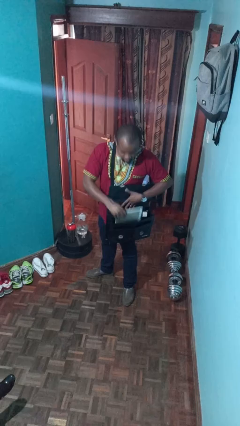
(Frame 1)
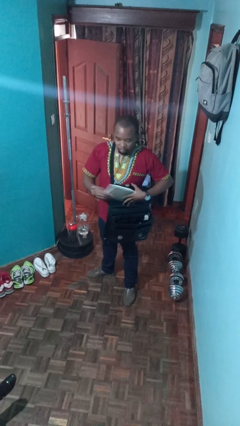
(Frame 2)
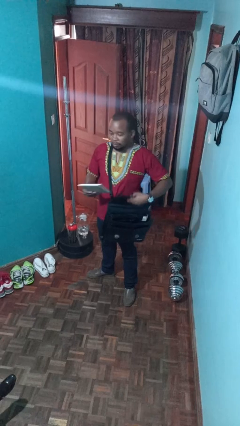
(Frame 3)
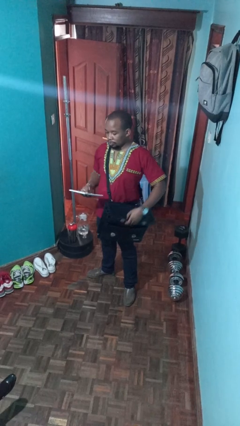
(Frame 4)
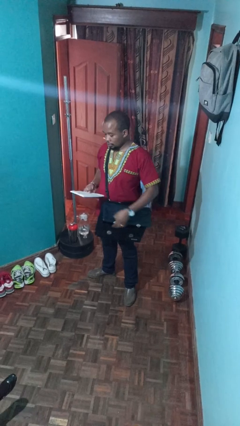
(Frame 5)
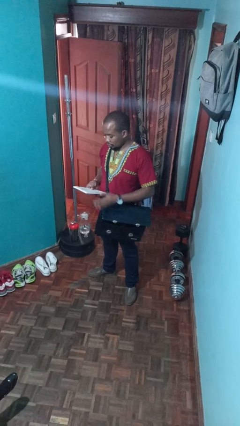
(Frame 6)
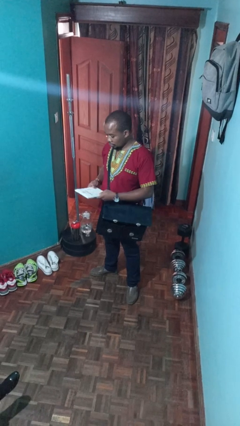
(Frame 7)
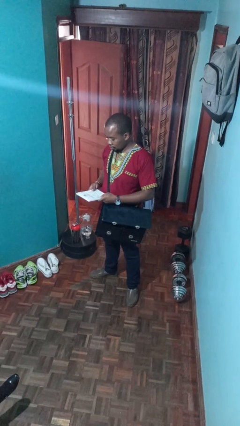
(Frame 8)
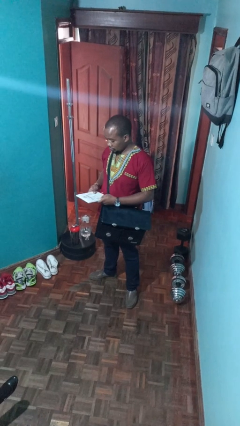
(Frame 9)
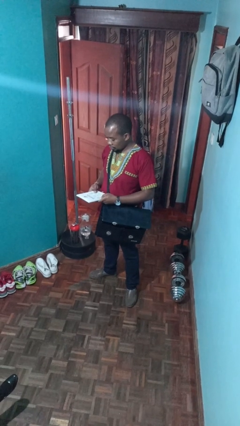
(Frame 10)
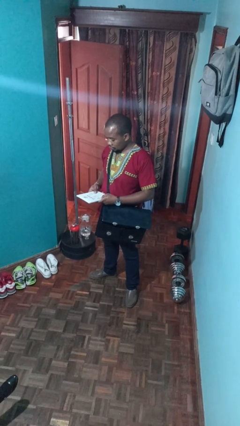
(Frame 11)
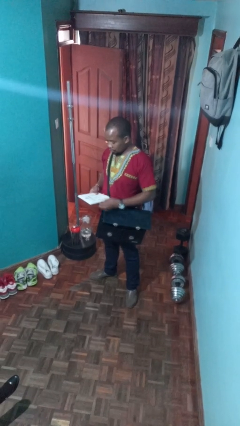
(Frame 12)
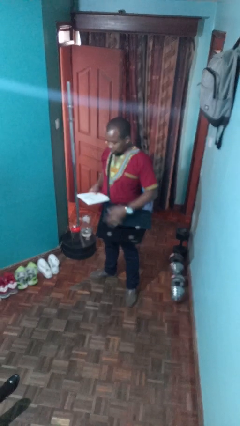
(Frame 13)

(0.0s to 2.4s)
person takes object from purse

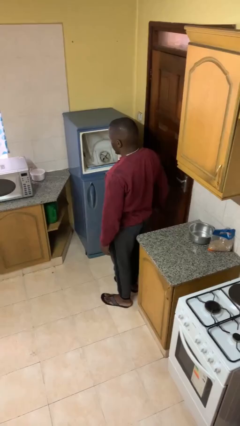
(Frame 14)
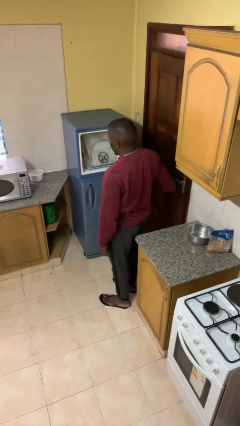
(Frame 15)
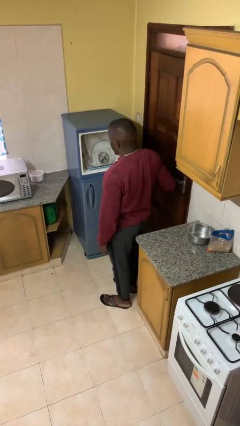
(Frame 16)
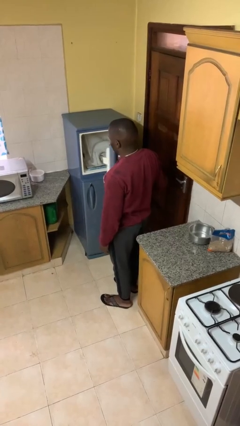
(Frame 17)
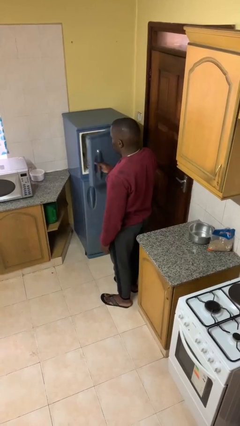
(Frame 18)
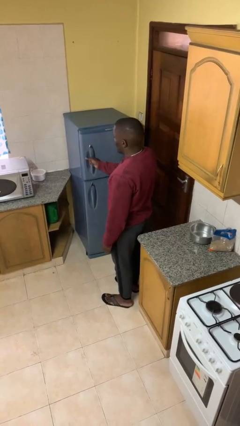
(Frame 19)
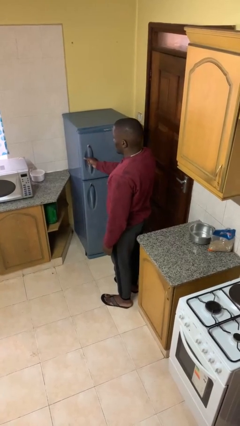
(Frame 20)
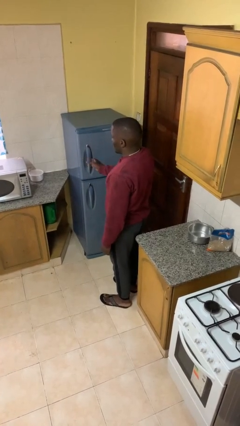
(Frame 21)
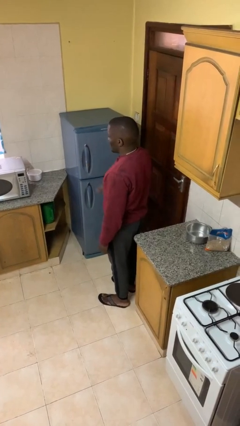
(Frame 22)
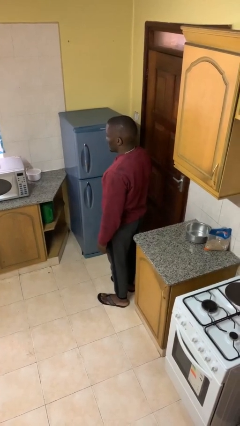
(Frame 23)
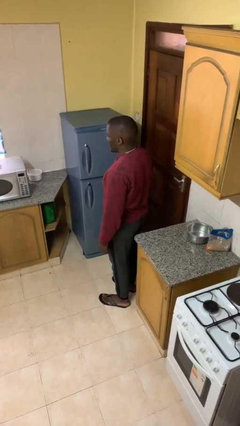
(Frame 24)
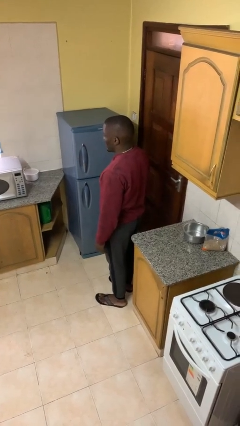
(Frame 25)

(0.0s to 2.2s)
person closes refrigerator

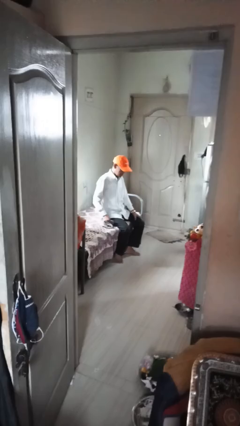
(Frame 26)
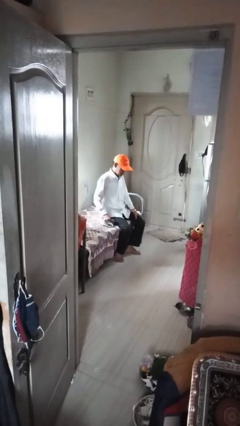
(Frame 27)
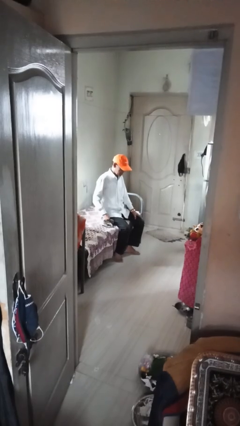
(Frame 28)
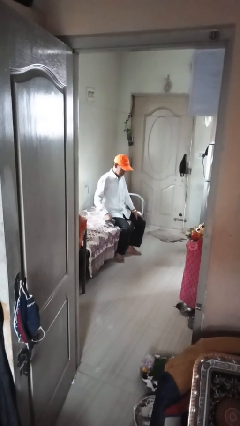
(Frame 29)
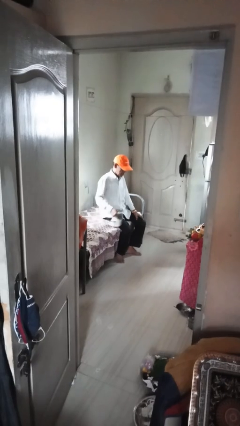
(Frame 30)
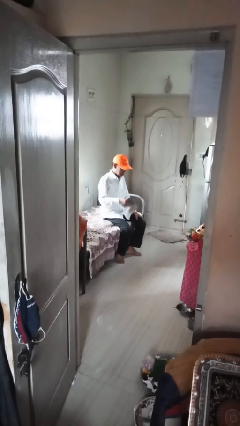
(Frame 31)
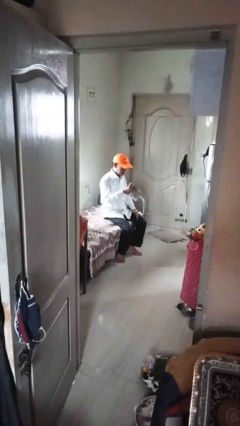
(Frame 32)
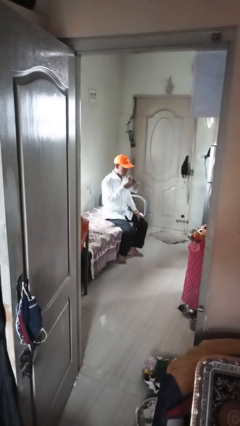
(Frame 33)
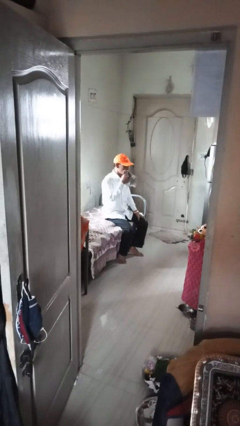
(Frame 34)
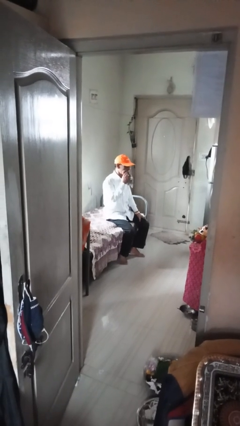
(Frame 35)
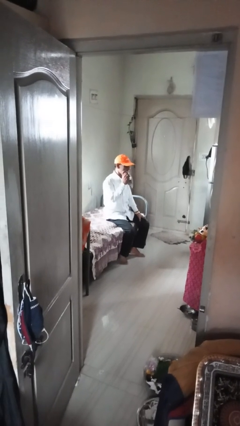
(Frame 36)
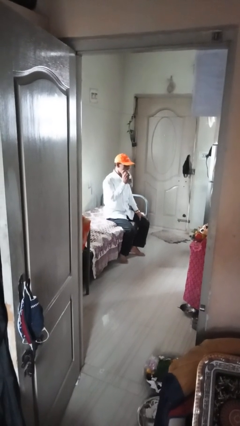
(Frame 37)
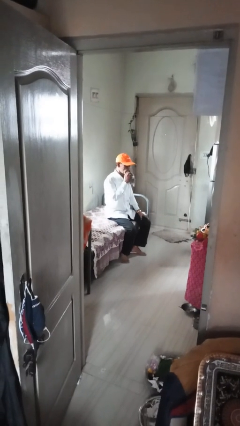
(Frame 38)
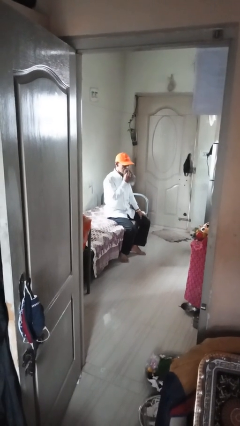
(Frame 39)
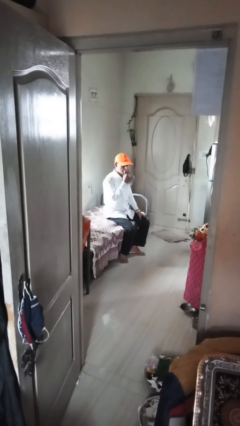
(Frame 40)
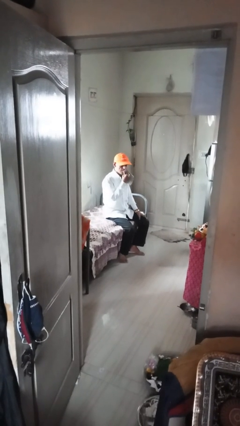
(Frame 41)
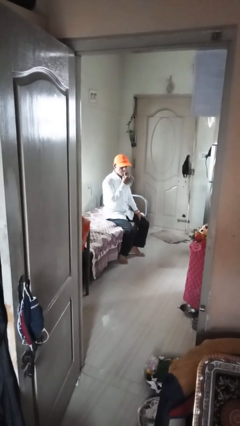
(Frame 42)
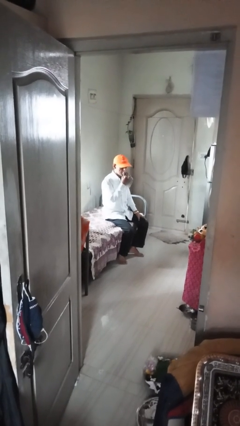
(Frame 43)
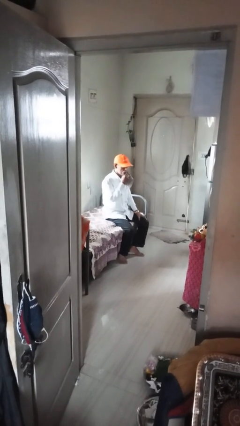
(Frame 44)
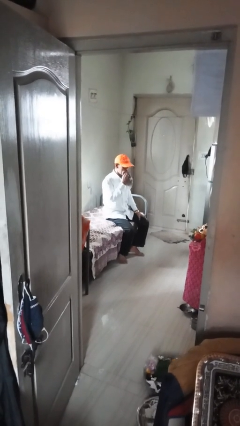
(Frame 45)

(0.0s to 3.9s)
person wipes mouth with napkin

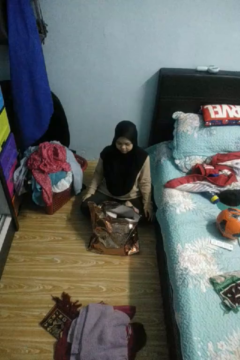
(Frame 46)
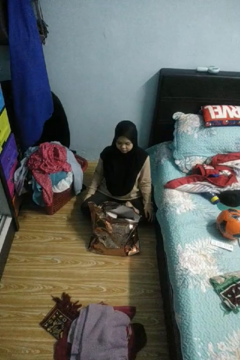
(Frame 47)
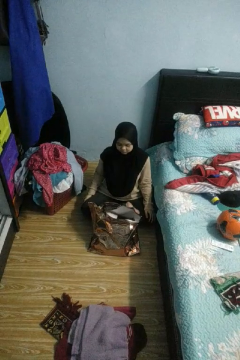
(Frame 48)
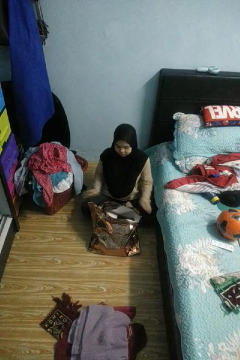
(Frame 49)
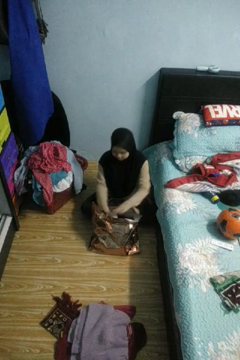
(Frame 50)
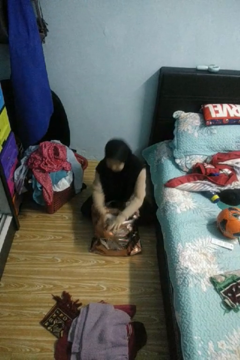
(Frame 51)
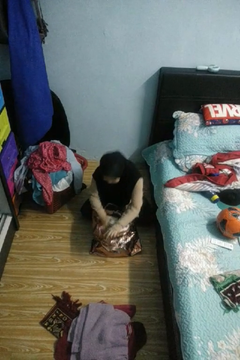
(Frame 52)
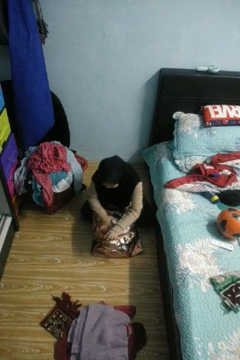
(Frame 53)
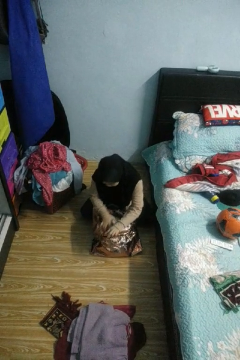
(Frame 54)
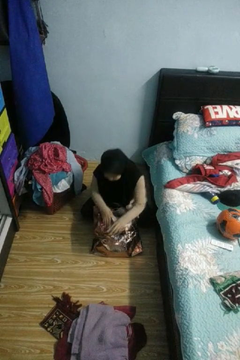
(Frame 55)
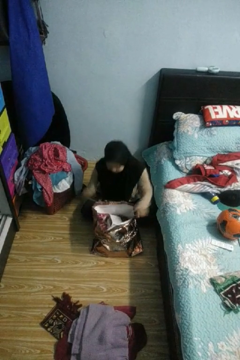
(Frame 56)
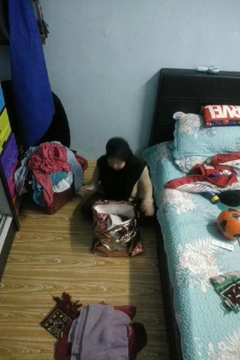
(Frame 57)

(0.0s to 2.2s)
person searches in bag

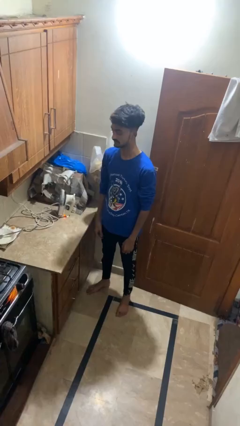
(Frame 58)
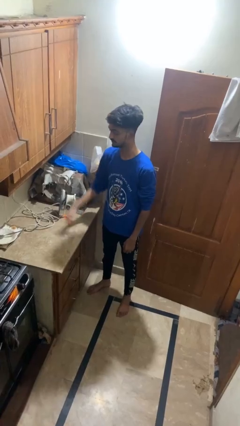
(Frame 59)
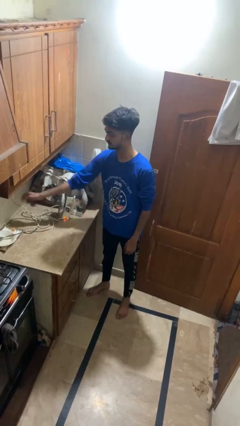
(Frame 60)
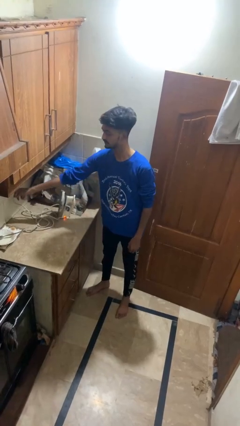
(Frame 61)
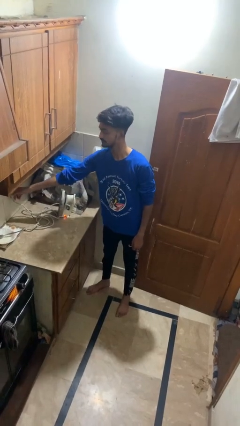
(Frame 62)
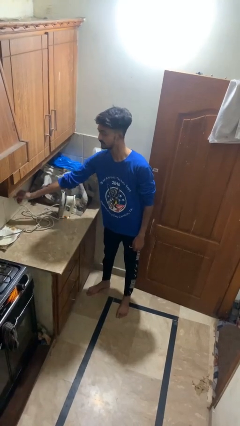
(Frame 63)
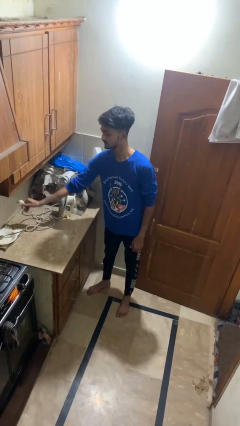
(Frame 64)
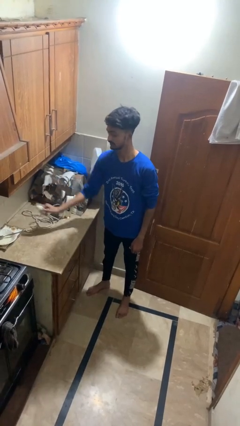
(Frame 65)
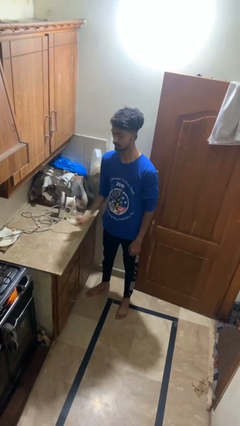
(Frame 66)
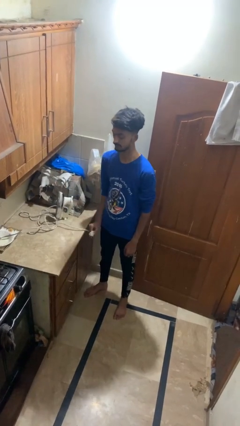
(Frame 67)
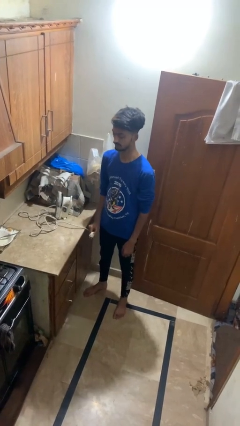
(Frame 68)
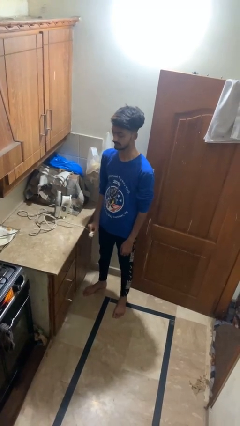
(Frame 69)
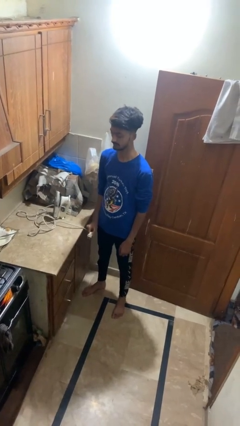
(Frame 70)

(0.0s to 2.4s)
person unplugs from electrical socket

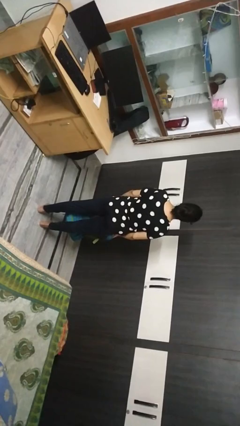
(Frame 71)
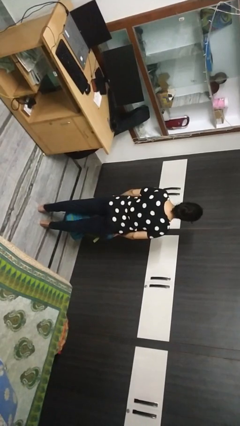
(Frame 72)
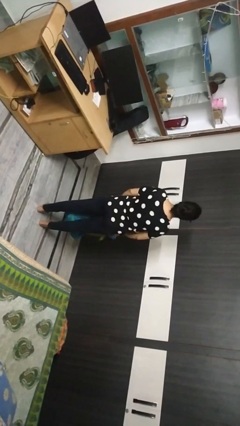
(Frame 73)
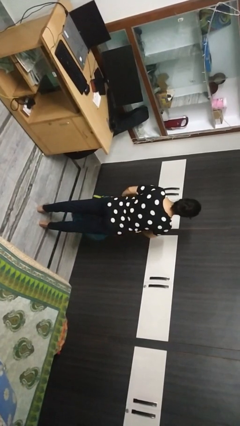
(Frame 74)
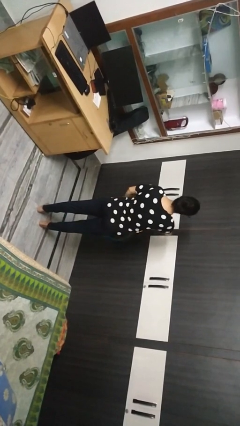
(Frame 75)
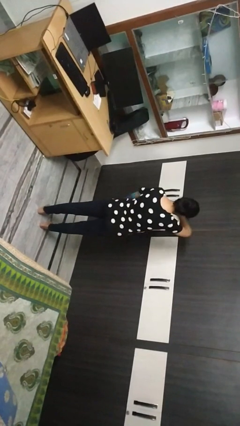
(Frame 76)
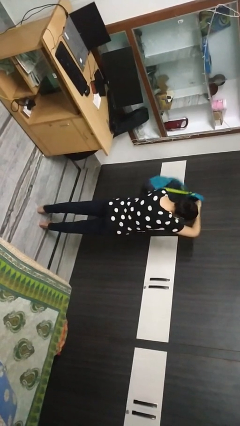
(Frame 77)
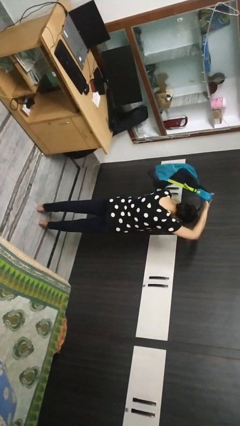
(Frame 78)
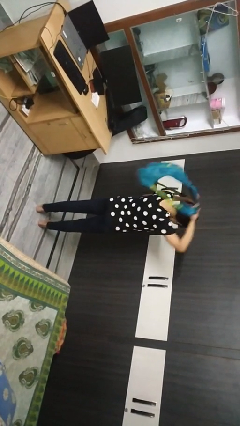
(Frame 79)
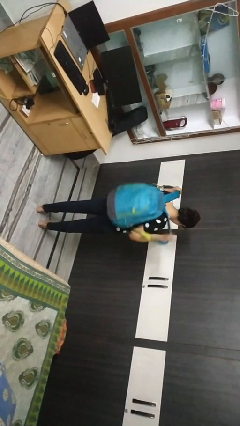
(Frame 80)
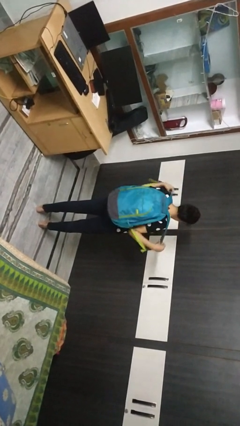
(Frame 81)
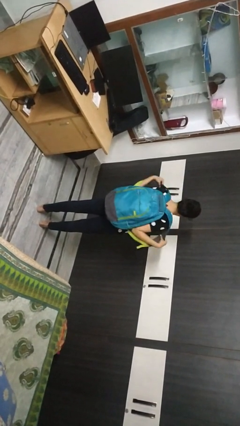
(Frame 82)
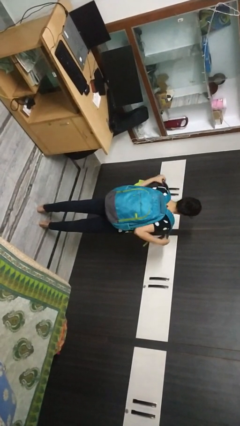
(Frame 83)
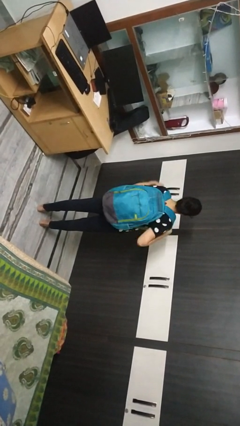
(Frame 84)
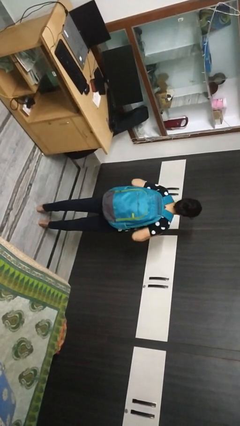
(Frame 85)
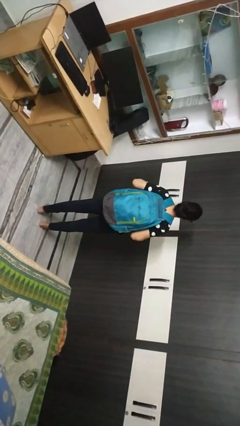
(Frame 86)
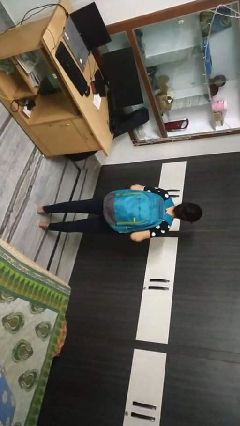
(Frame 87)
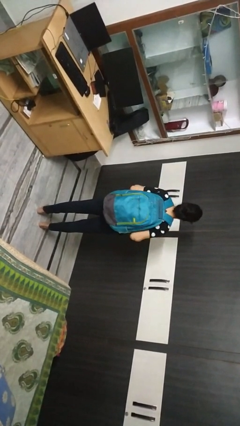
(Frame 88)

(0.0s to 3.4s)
person puts on backpack

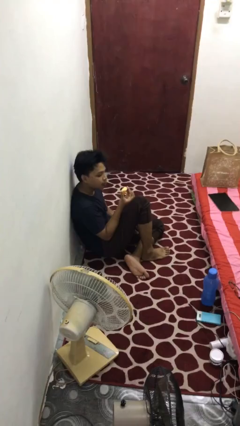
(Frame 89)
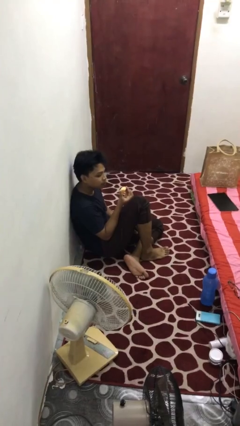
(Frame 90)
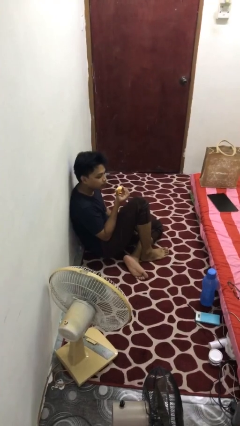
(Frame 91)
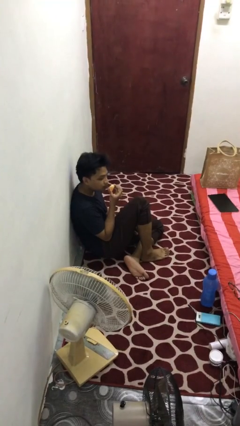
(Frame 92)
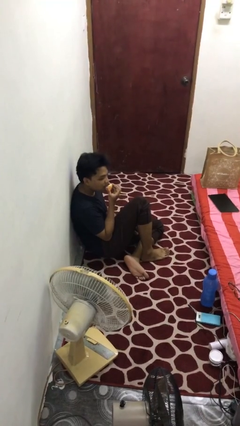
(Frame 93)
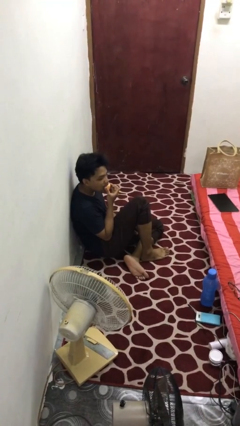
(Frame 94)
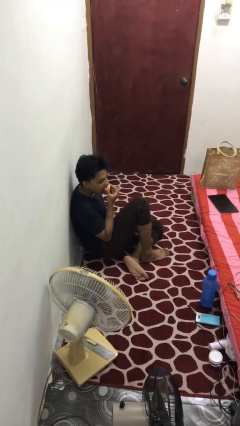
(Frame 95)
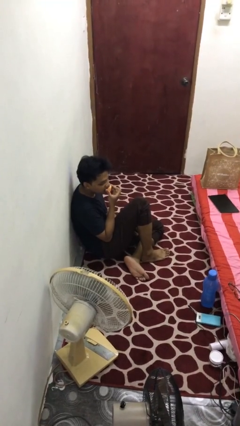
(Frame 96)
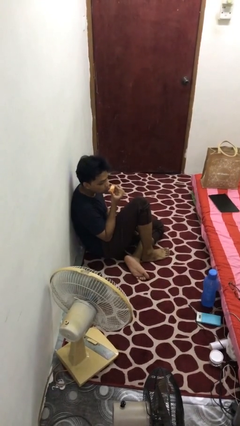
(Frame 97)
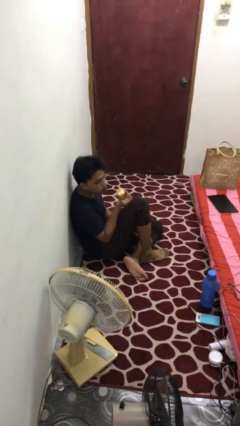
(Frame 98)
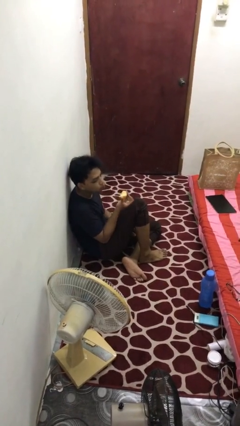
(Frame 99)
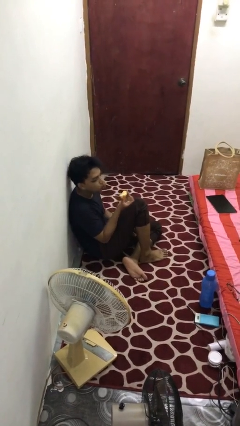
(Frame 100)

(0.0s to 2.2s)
person eats apple
